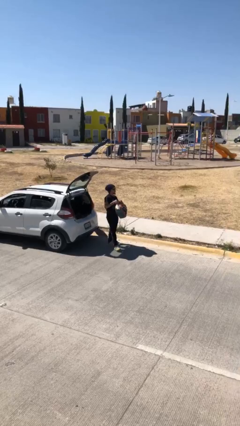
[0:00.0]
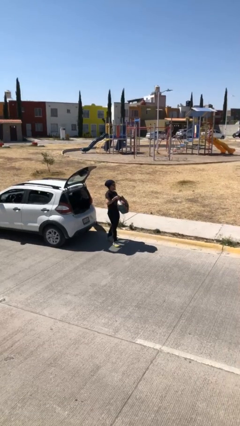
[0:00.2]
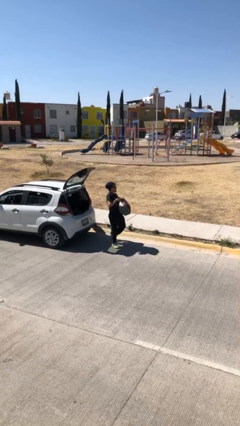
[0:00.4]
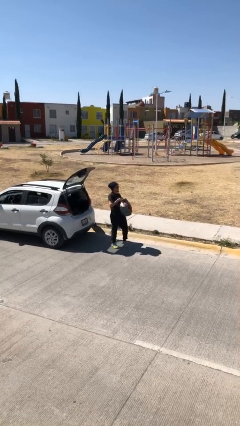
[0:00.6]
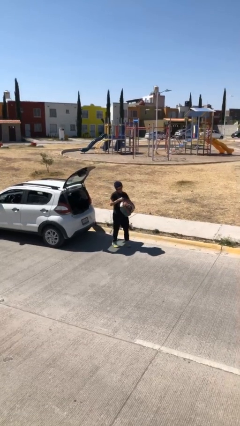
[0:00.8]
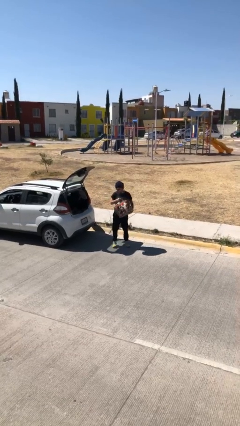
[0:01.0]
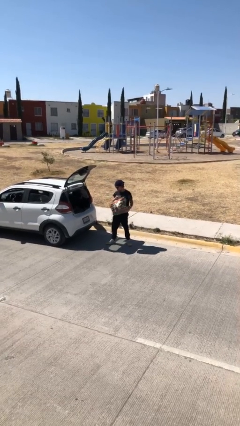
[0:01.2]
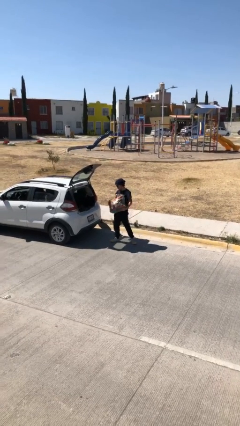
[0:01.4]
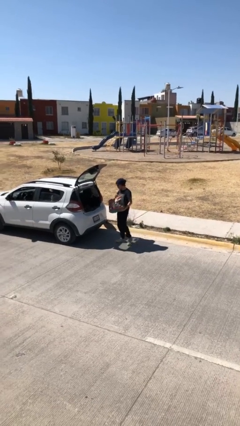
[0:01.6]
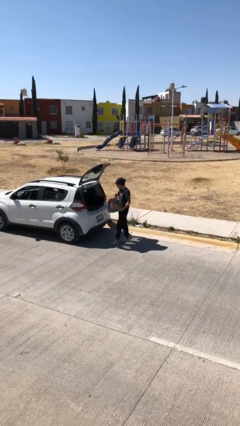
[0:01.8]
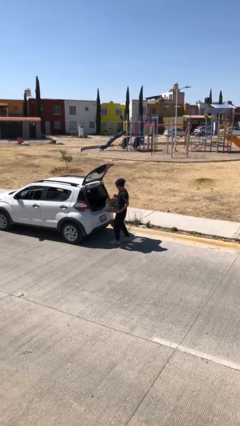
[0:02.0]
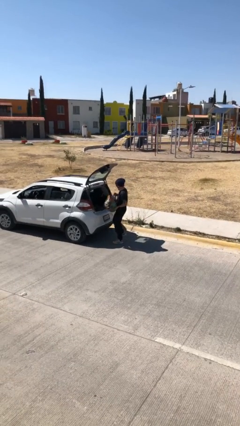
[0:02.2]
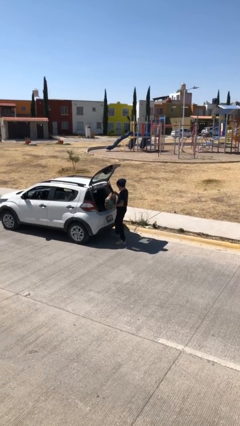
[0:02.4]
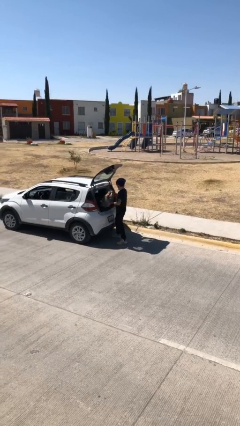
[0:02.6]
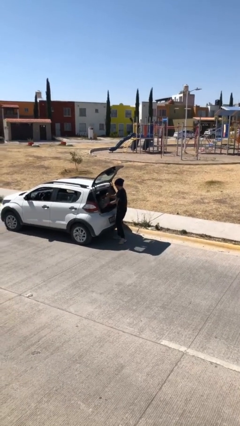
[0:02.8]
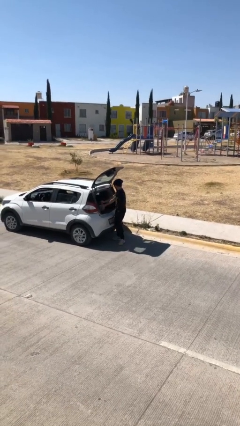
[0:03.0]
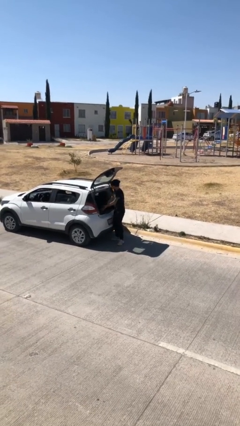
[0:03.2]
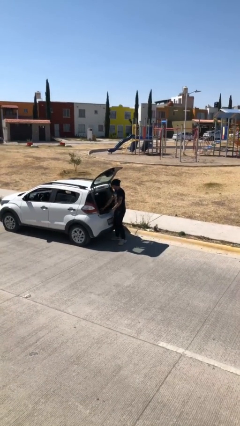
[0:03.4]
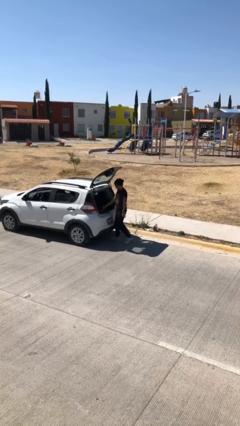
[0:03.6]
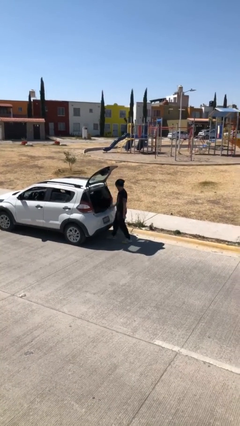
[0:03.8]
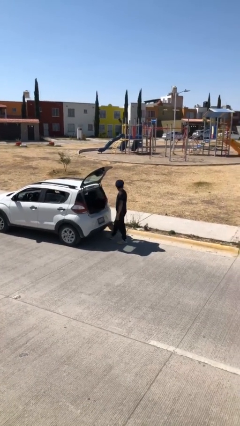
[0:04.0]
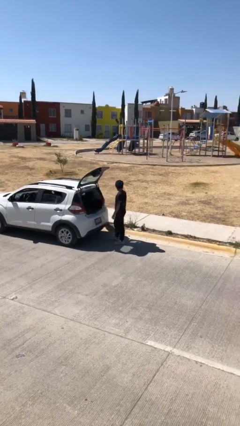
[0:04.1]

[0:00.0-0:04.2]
person loads car

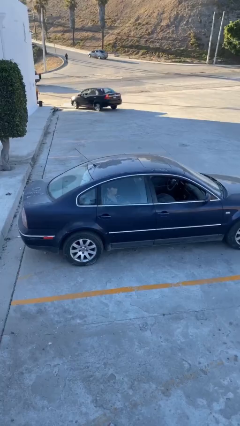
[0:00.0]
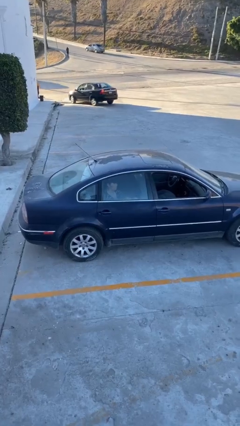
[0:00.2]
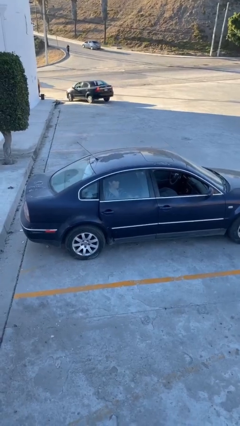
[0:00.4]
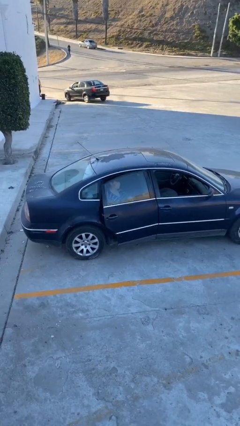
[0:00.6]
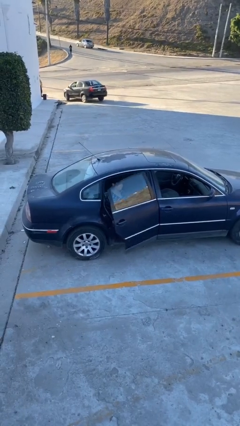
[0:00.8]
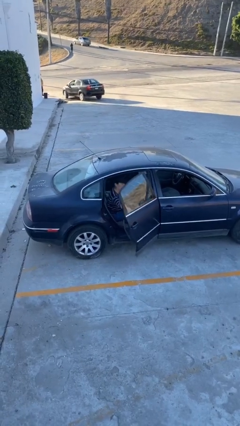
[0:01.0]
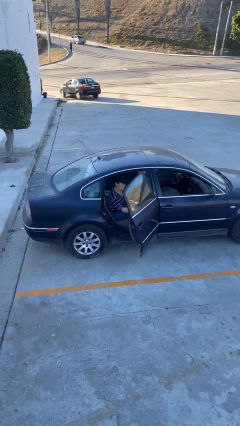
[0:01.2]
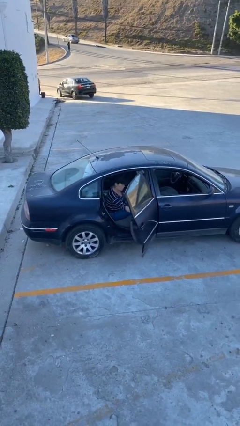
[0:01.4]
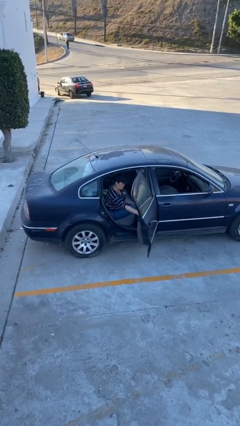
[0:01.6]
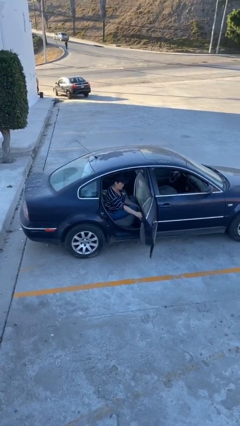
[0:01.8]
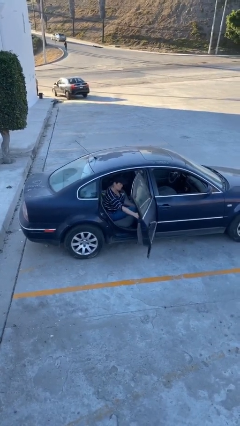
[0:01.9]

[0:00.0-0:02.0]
person opens car door

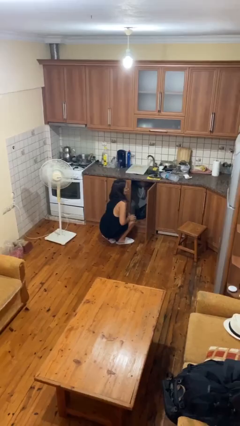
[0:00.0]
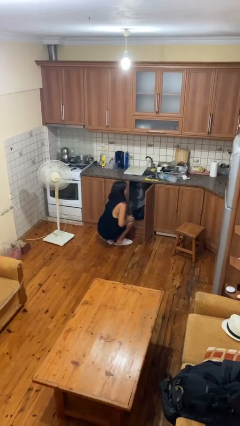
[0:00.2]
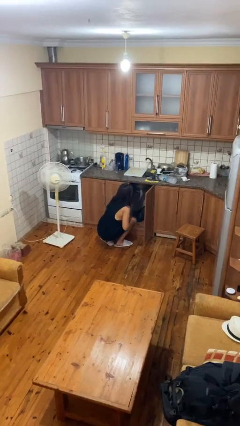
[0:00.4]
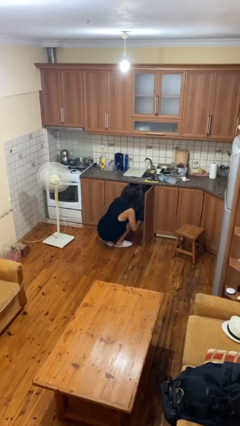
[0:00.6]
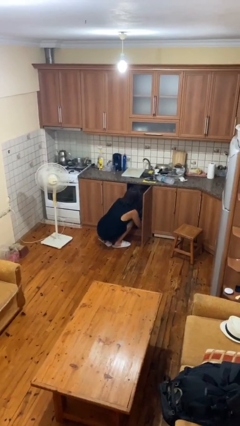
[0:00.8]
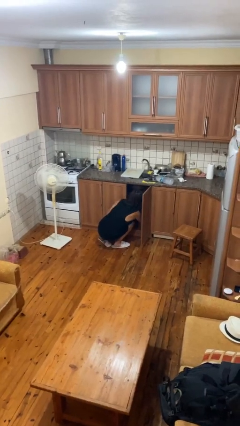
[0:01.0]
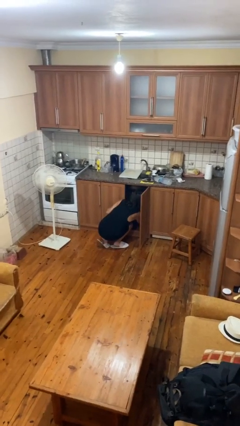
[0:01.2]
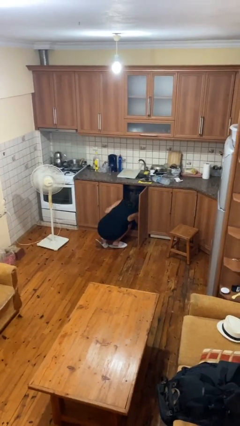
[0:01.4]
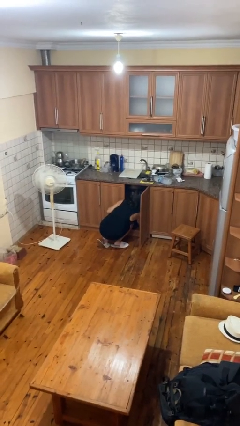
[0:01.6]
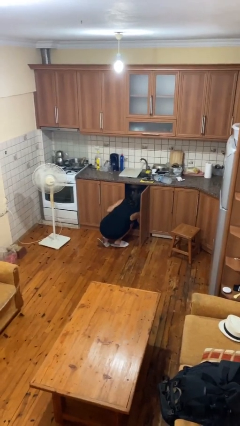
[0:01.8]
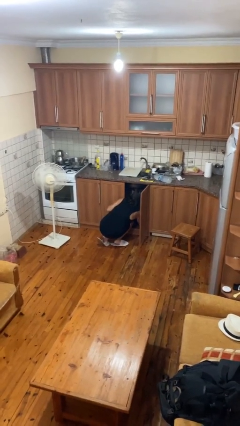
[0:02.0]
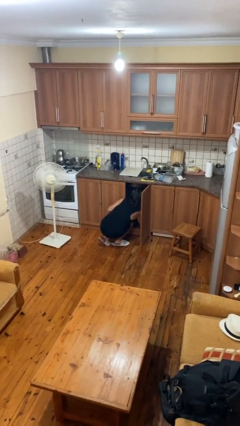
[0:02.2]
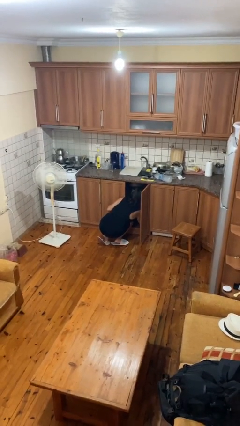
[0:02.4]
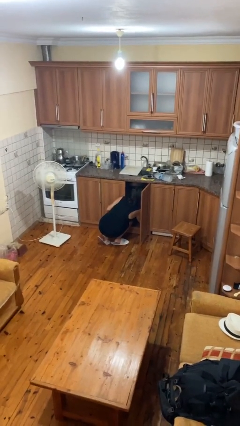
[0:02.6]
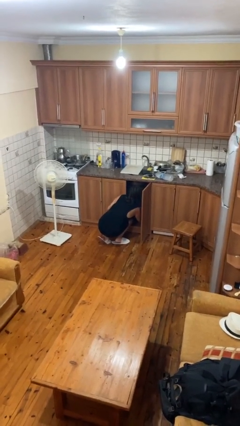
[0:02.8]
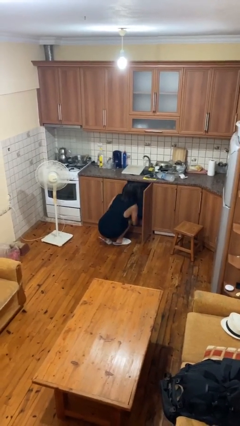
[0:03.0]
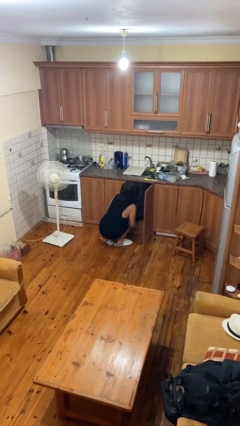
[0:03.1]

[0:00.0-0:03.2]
person searches in cabinet

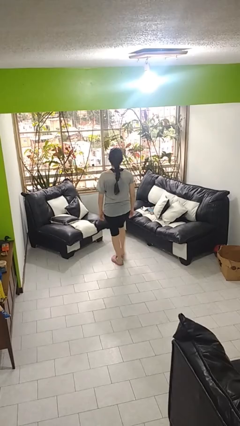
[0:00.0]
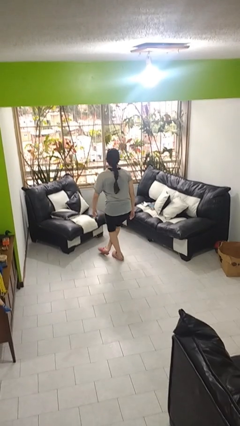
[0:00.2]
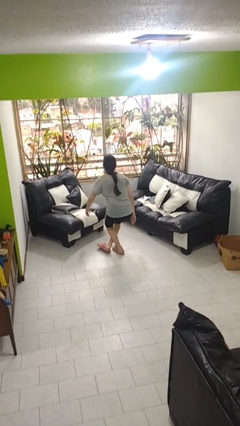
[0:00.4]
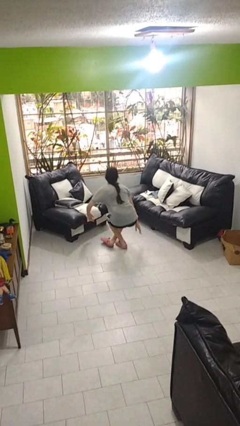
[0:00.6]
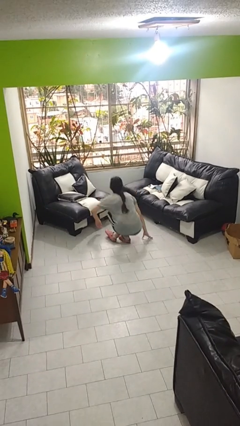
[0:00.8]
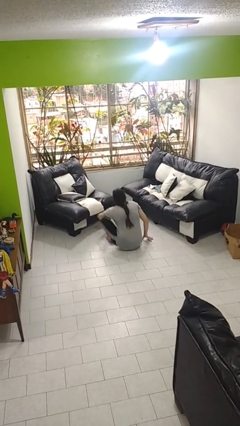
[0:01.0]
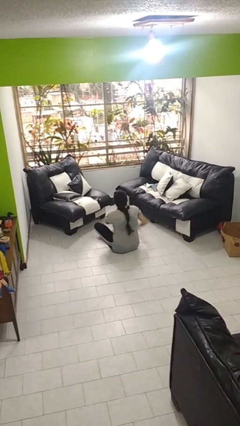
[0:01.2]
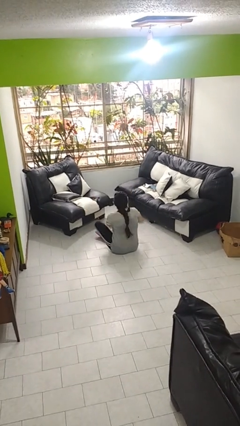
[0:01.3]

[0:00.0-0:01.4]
person sits crisscross

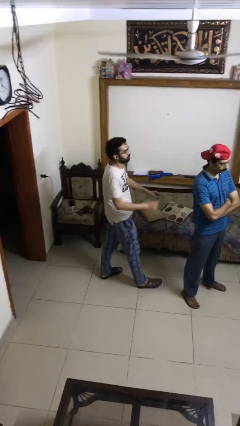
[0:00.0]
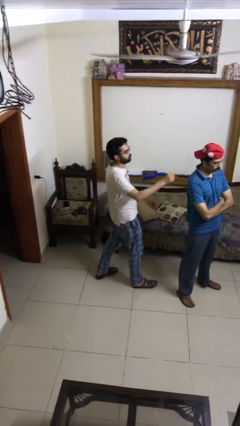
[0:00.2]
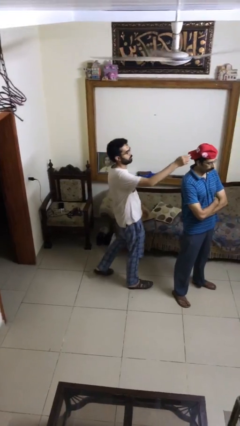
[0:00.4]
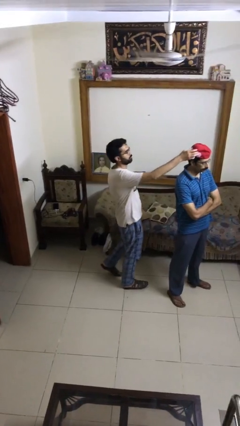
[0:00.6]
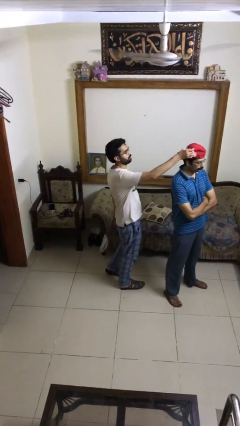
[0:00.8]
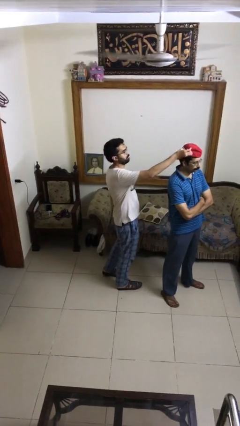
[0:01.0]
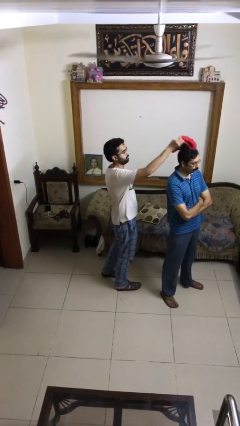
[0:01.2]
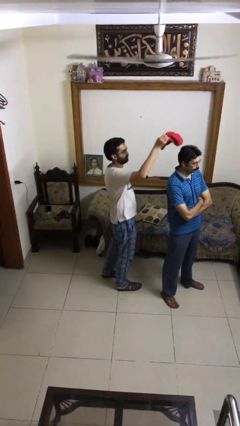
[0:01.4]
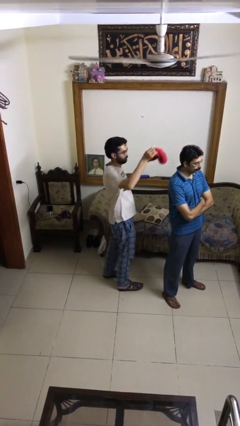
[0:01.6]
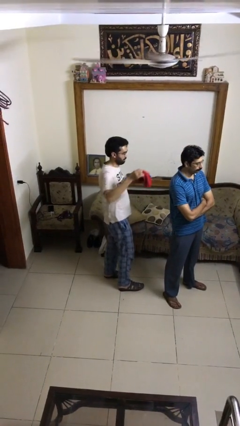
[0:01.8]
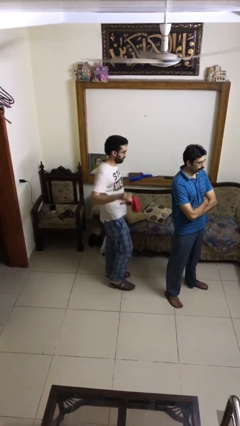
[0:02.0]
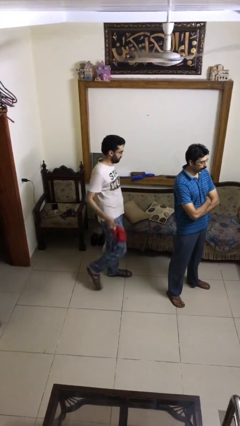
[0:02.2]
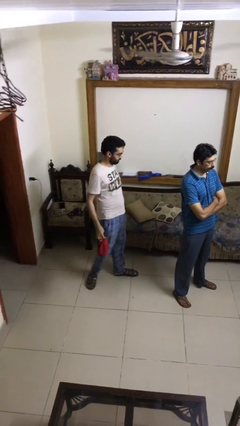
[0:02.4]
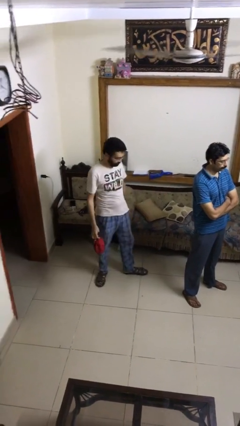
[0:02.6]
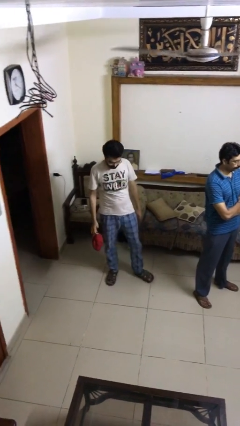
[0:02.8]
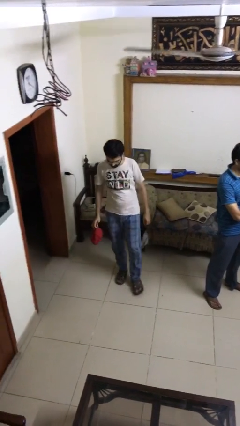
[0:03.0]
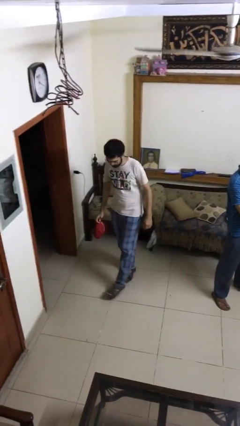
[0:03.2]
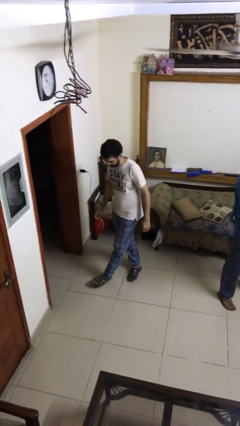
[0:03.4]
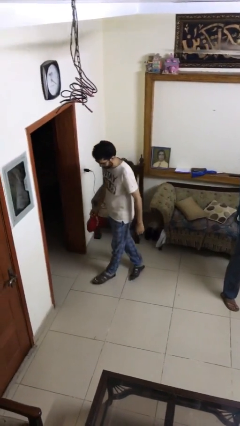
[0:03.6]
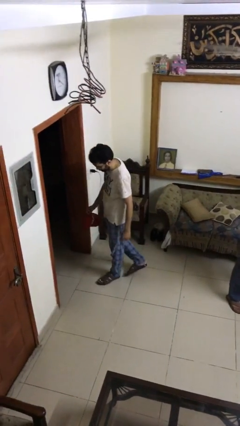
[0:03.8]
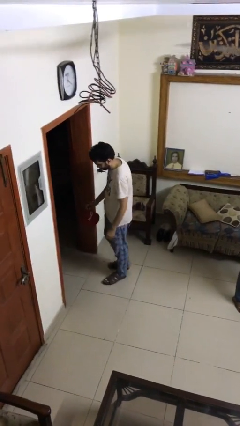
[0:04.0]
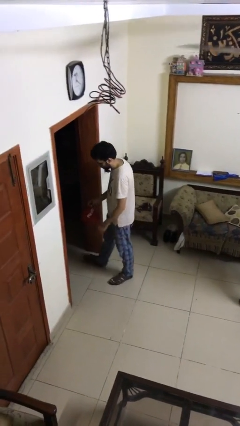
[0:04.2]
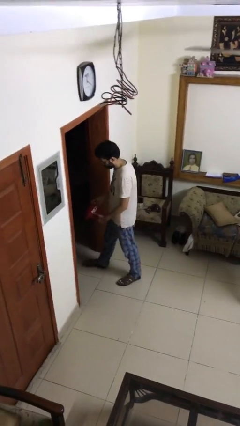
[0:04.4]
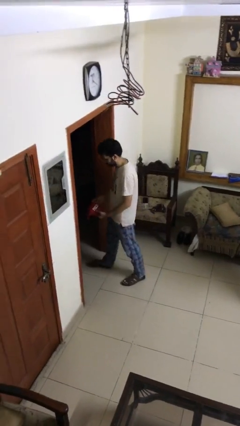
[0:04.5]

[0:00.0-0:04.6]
person steals object from person

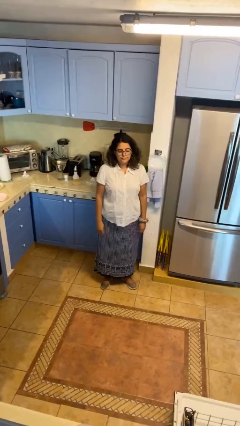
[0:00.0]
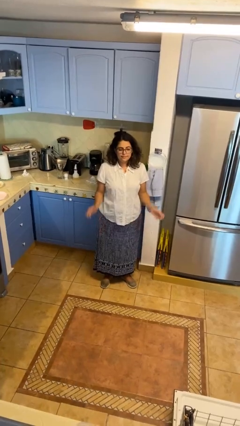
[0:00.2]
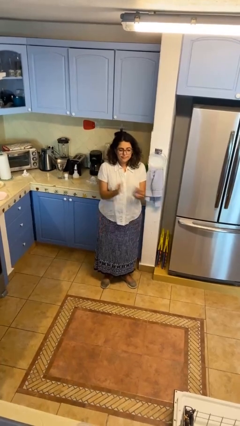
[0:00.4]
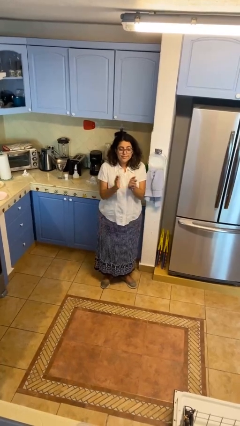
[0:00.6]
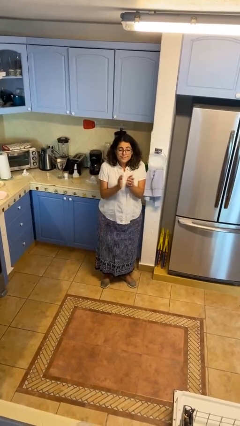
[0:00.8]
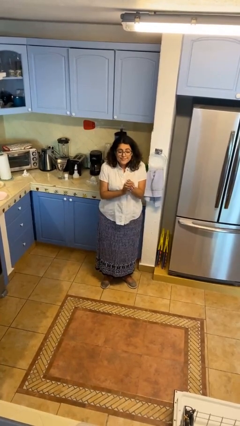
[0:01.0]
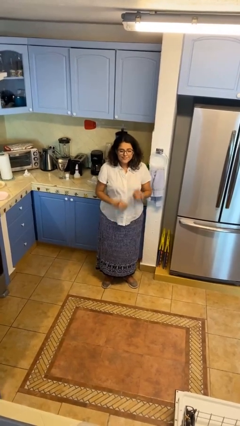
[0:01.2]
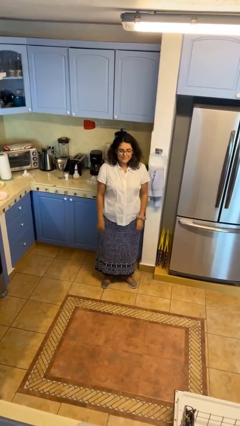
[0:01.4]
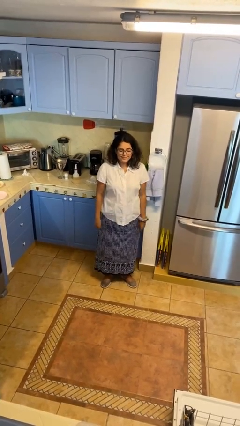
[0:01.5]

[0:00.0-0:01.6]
person claps hands

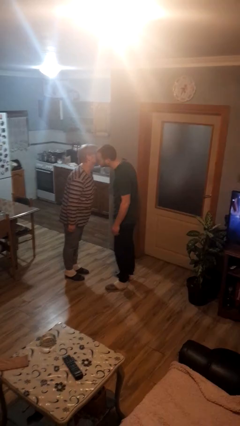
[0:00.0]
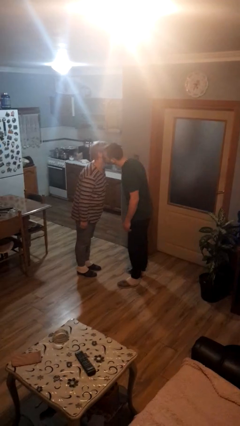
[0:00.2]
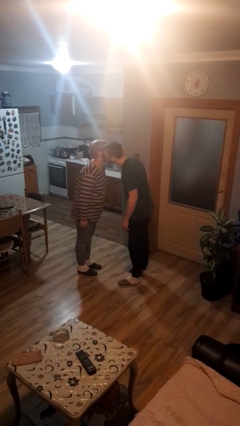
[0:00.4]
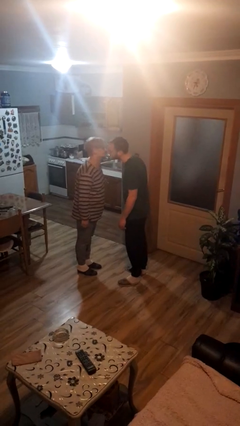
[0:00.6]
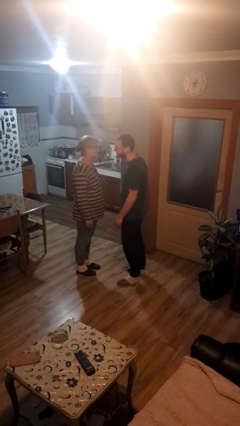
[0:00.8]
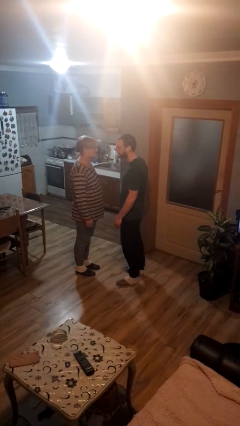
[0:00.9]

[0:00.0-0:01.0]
person kisses cheek of person
